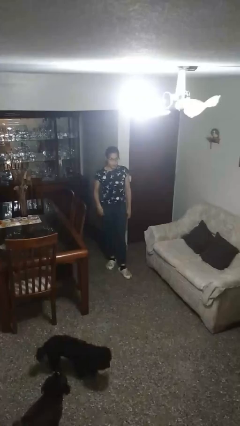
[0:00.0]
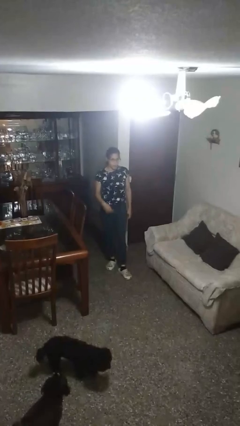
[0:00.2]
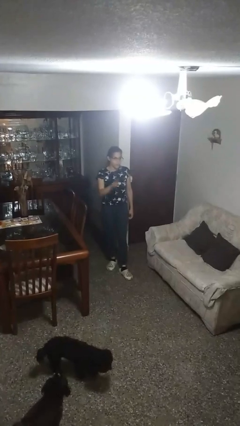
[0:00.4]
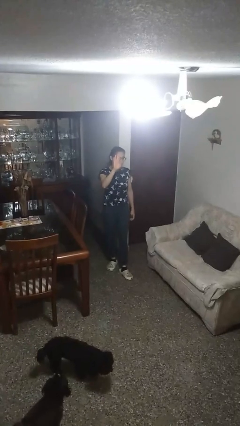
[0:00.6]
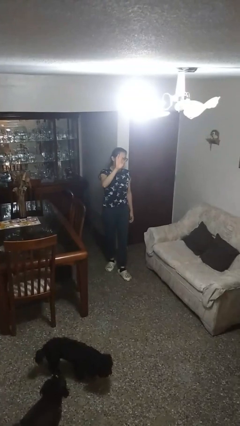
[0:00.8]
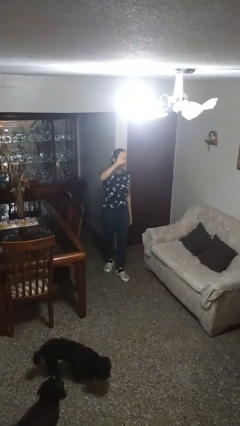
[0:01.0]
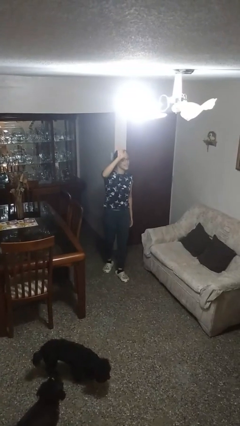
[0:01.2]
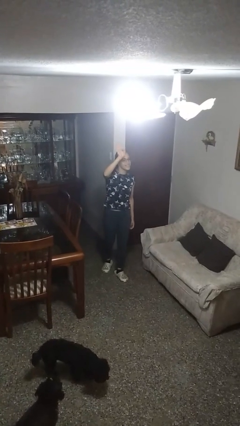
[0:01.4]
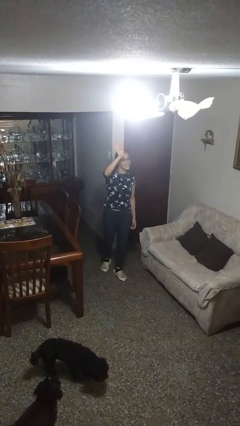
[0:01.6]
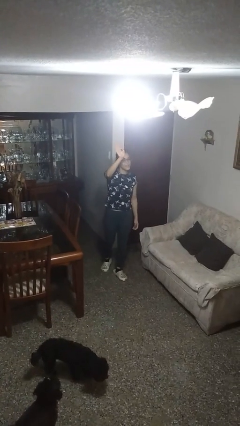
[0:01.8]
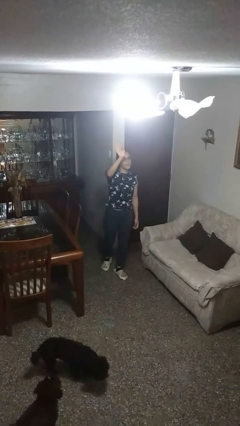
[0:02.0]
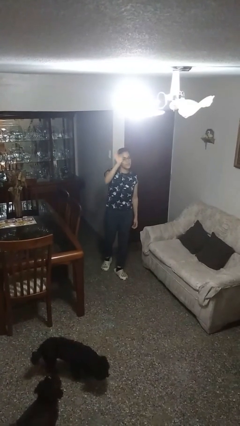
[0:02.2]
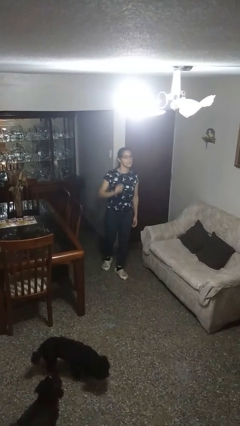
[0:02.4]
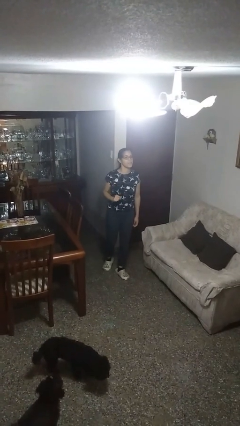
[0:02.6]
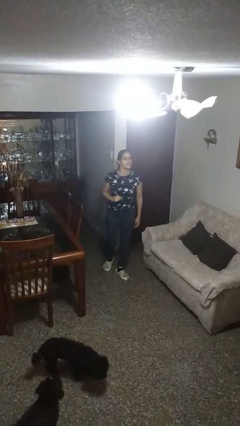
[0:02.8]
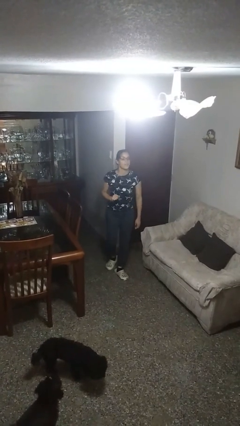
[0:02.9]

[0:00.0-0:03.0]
person waves at person

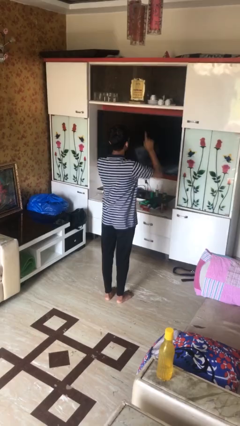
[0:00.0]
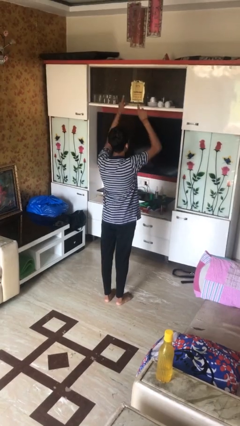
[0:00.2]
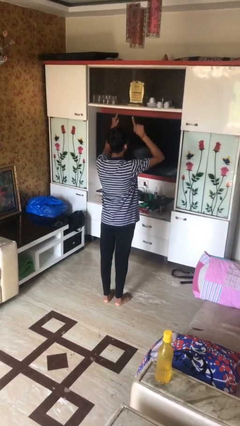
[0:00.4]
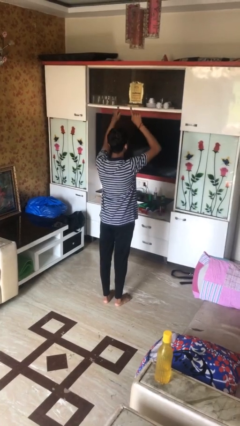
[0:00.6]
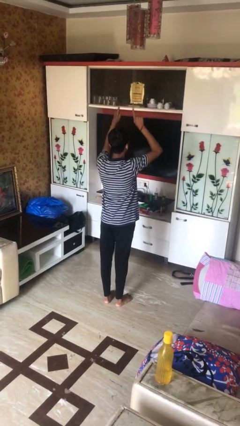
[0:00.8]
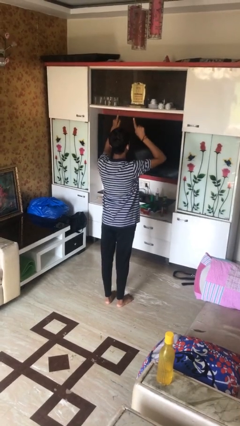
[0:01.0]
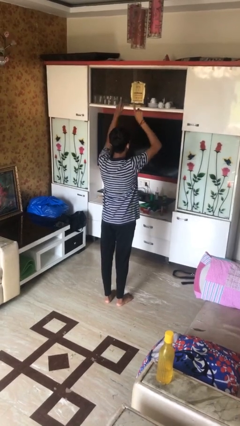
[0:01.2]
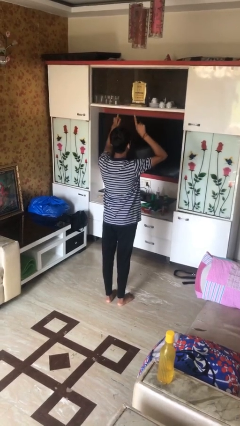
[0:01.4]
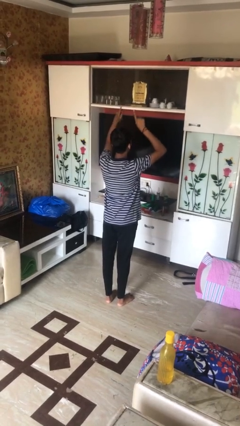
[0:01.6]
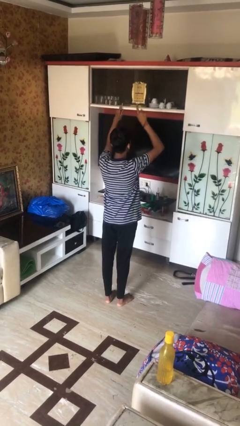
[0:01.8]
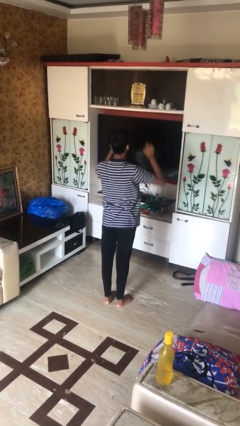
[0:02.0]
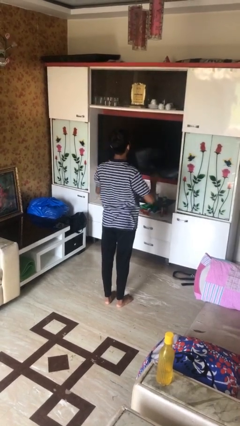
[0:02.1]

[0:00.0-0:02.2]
person dances in place

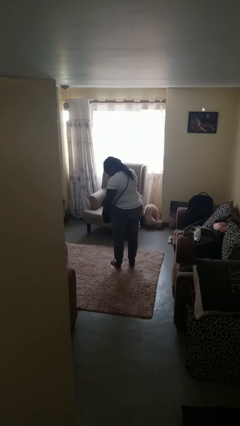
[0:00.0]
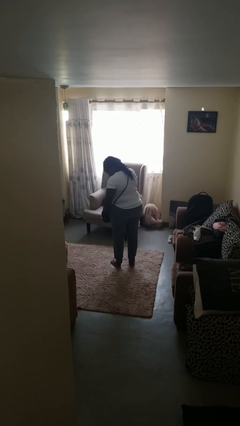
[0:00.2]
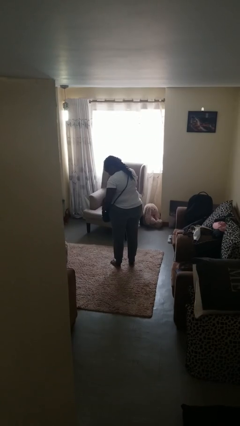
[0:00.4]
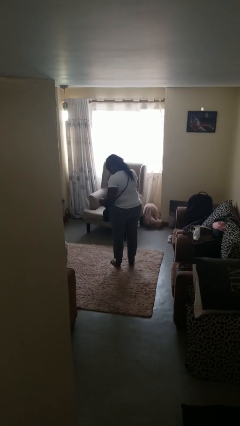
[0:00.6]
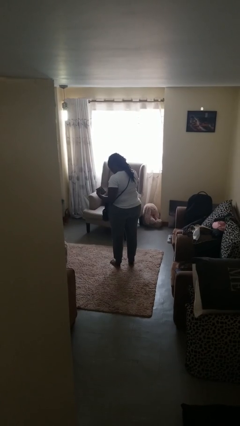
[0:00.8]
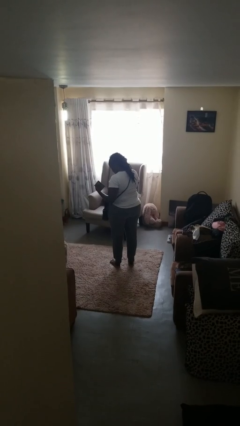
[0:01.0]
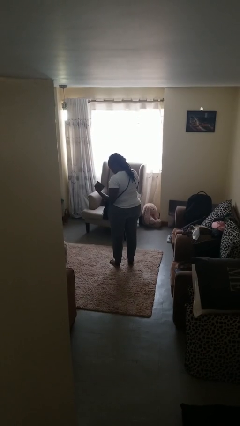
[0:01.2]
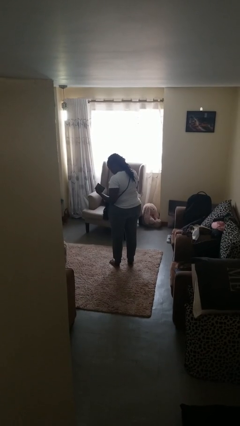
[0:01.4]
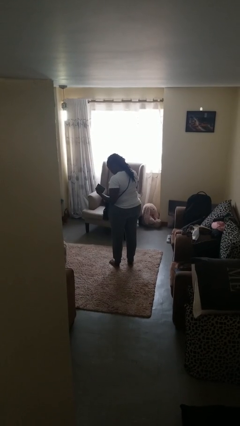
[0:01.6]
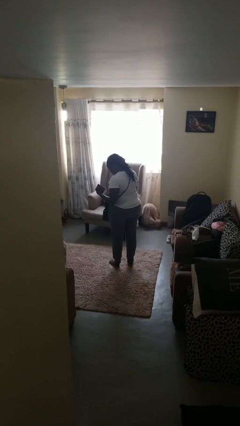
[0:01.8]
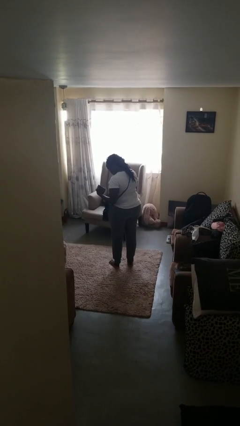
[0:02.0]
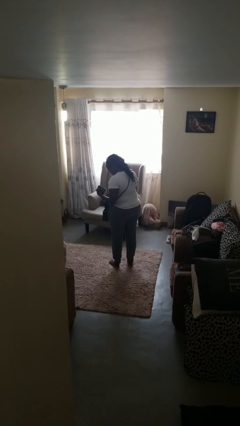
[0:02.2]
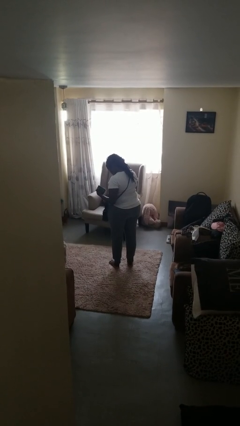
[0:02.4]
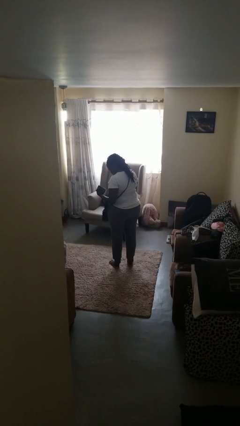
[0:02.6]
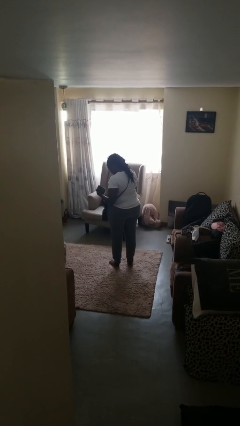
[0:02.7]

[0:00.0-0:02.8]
person takes object from purse

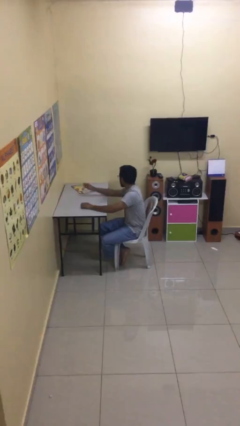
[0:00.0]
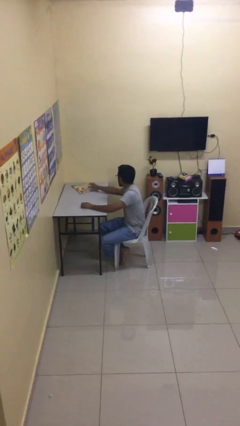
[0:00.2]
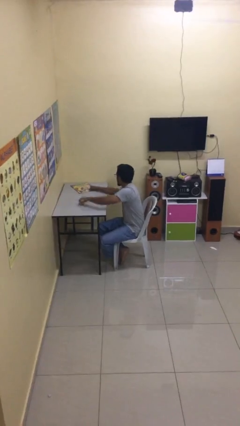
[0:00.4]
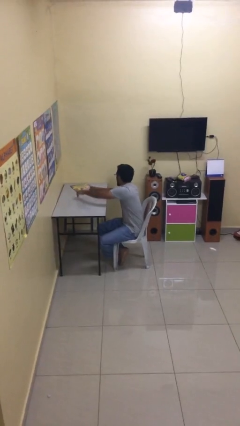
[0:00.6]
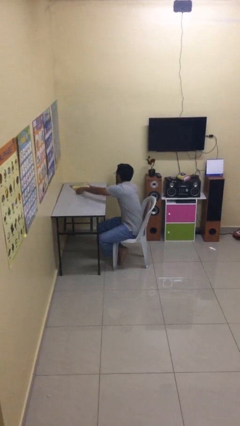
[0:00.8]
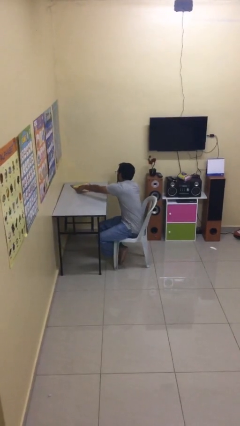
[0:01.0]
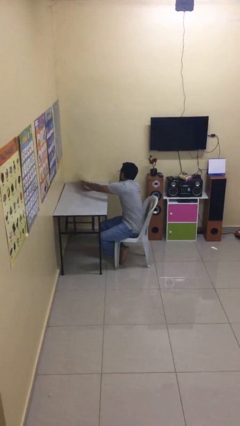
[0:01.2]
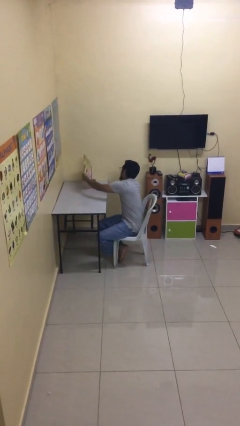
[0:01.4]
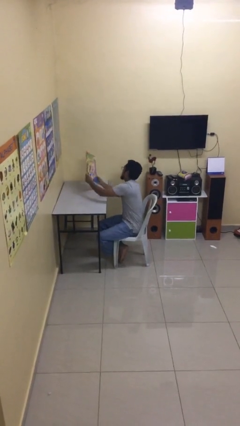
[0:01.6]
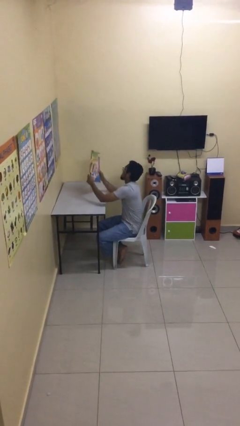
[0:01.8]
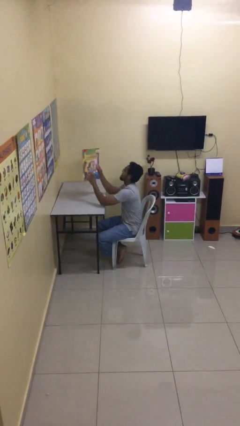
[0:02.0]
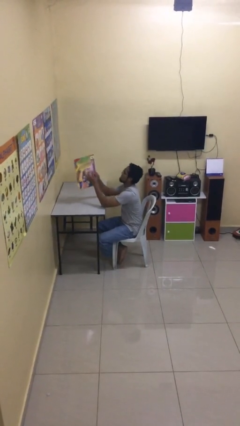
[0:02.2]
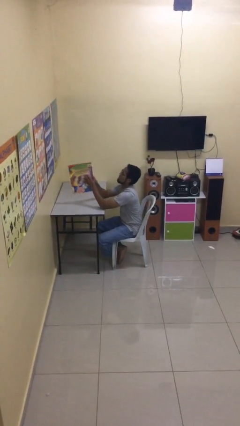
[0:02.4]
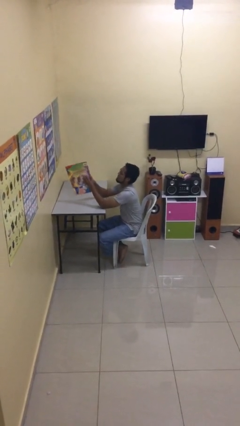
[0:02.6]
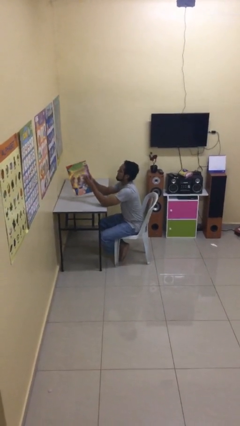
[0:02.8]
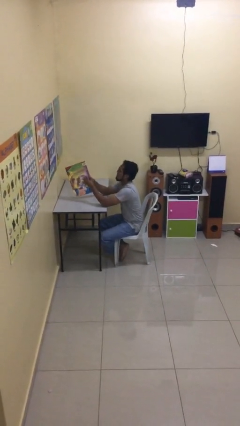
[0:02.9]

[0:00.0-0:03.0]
person picks up object from table

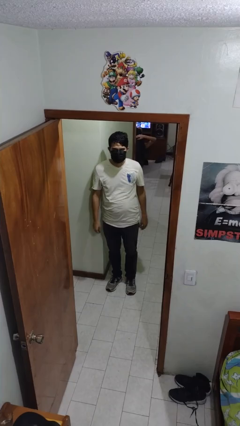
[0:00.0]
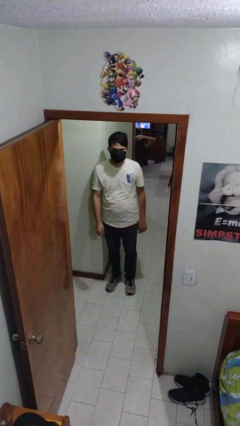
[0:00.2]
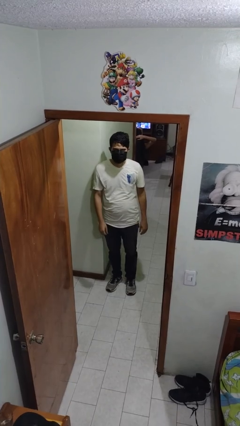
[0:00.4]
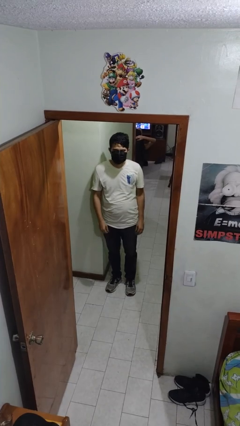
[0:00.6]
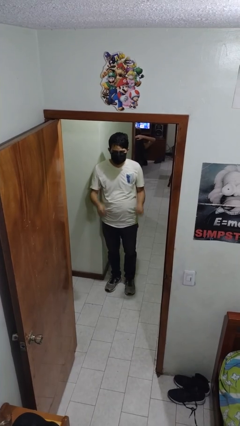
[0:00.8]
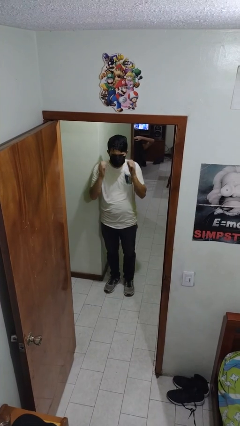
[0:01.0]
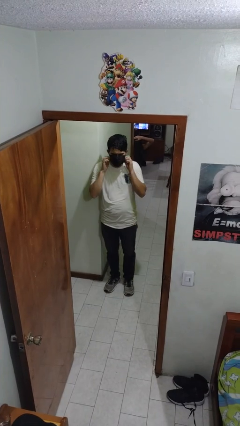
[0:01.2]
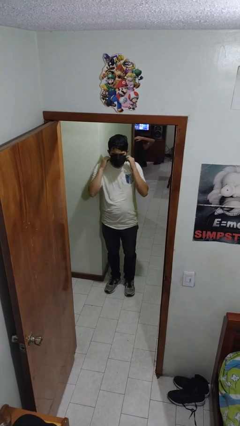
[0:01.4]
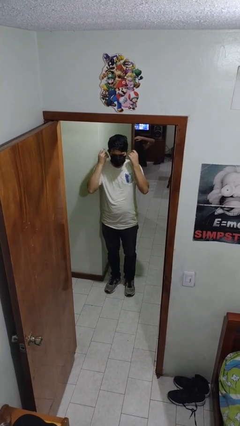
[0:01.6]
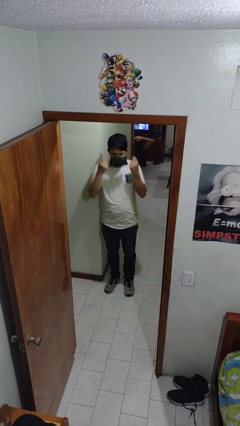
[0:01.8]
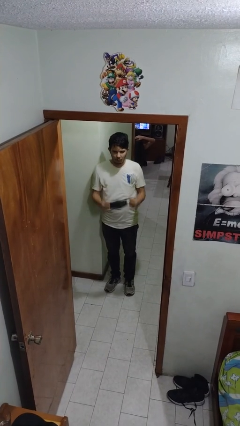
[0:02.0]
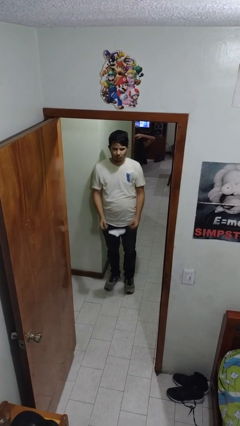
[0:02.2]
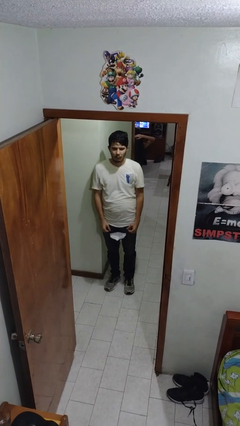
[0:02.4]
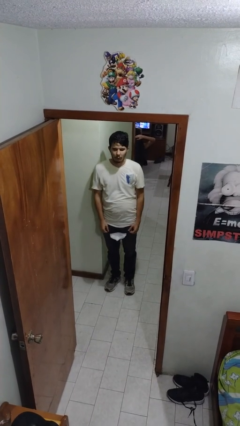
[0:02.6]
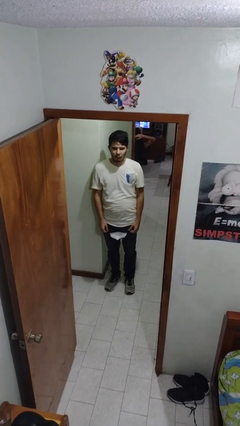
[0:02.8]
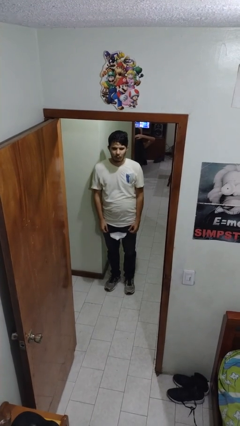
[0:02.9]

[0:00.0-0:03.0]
person takes off facemask

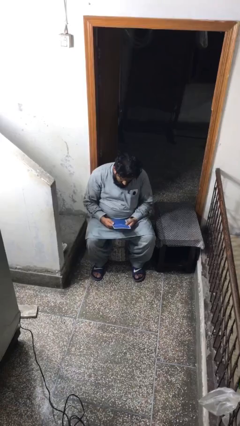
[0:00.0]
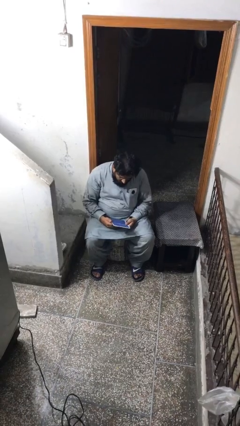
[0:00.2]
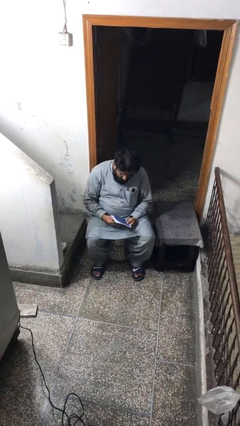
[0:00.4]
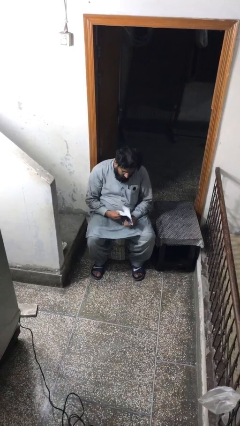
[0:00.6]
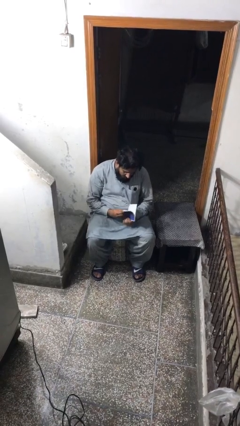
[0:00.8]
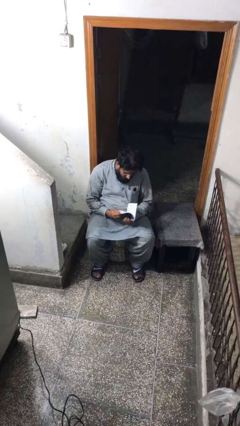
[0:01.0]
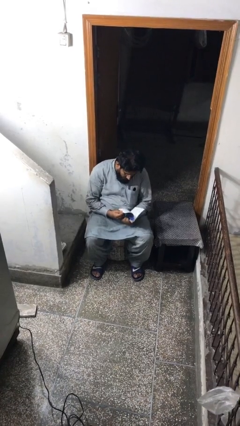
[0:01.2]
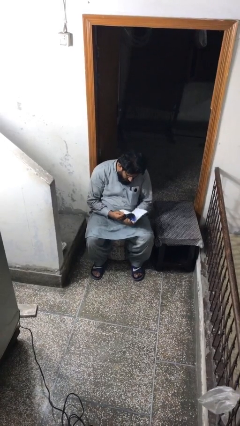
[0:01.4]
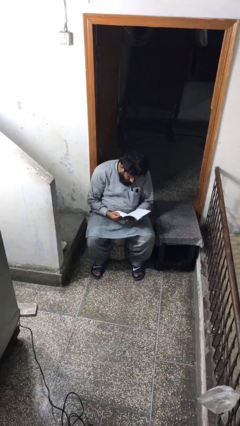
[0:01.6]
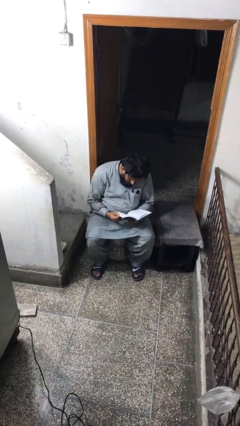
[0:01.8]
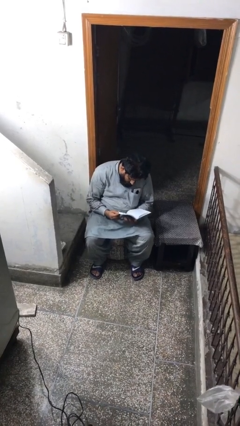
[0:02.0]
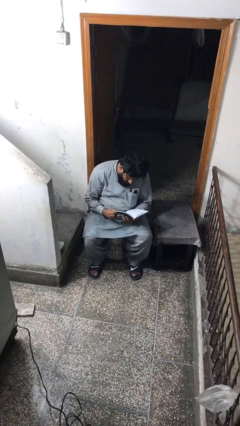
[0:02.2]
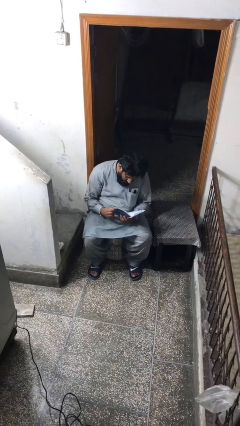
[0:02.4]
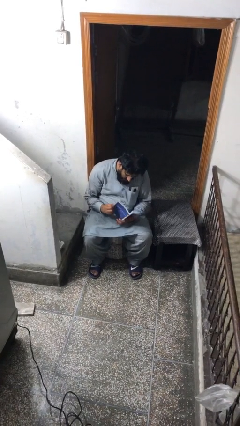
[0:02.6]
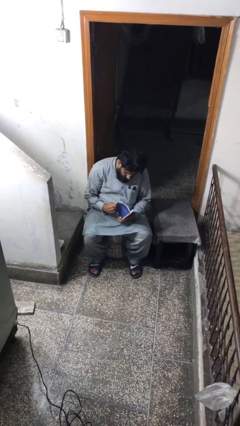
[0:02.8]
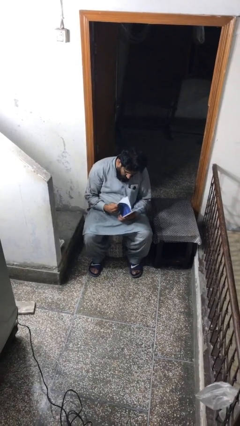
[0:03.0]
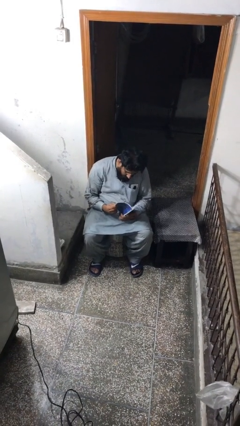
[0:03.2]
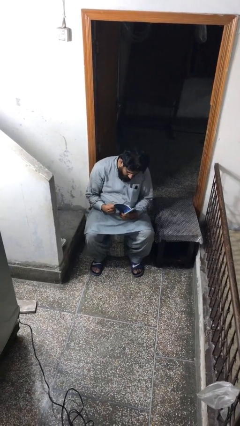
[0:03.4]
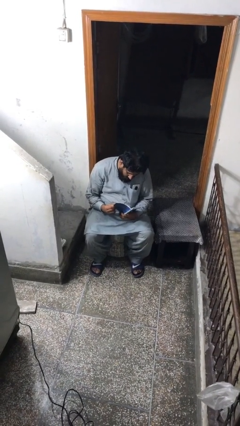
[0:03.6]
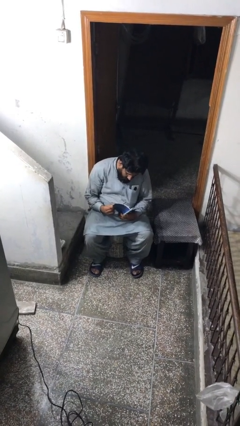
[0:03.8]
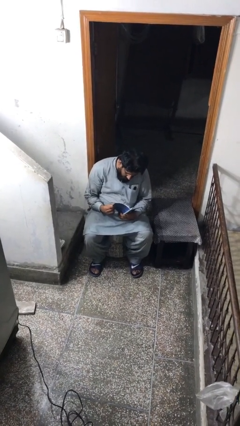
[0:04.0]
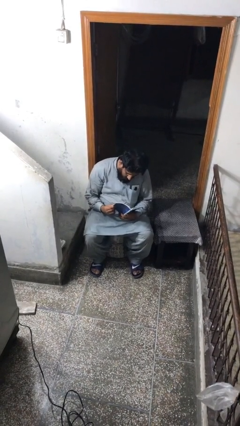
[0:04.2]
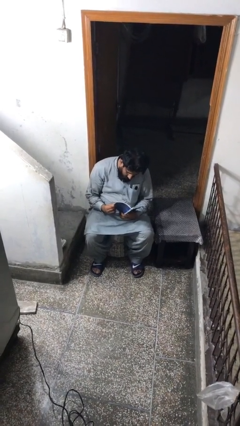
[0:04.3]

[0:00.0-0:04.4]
person reads document
